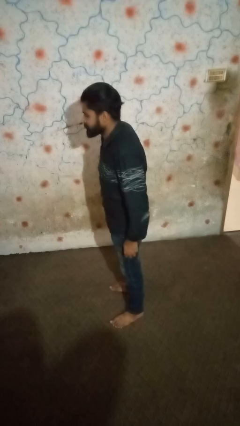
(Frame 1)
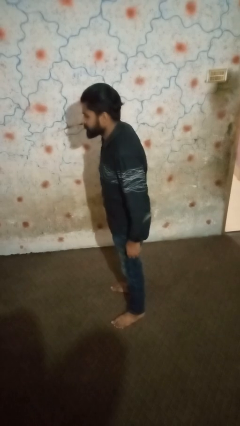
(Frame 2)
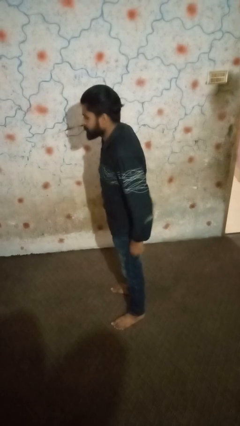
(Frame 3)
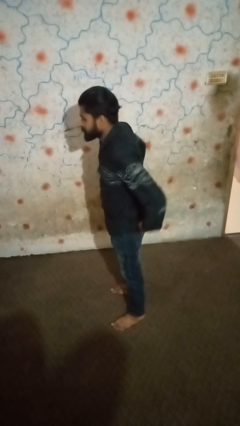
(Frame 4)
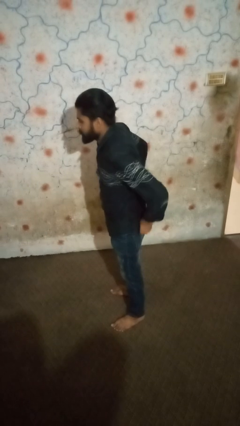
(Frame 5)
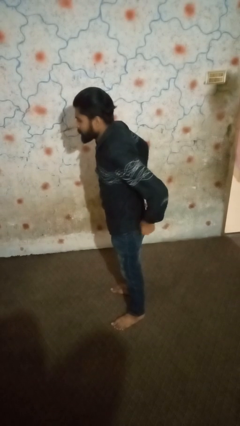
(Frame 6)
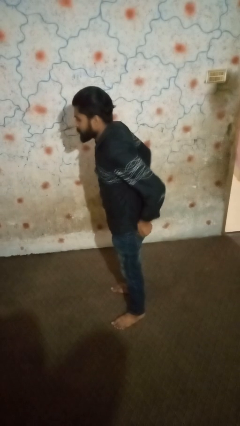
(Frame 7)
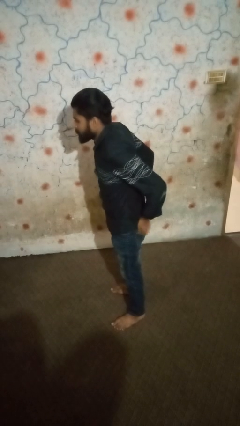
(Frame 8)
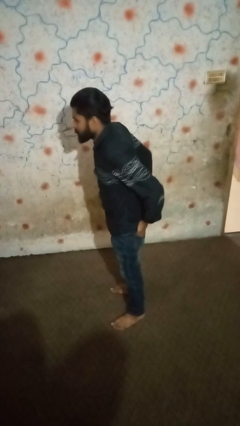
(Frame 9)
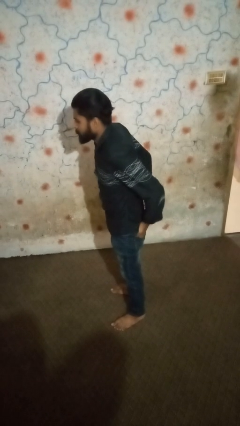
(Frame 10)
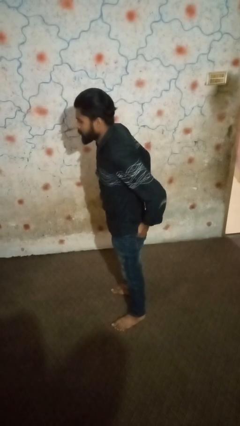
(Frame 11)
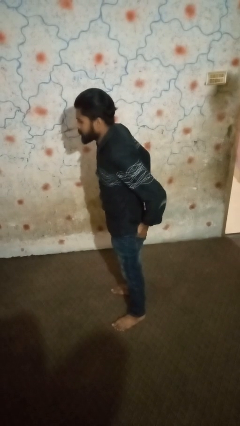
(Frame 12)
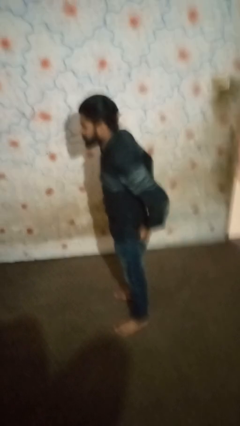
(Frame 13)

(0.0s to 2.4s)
person puts hands in back pockets

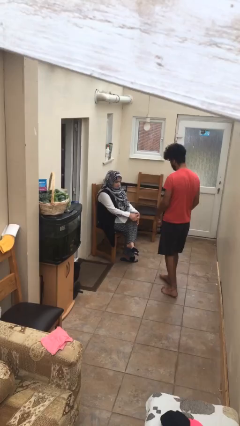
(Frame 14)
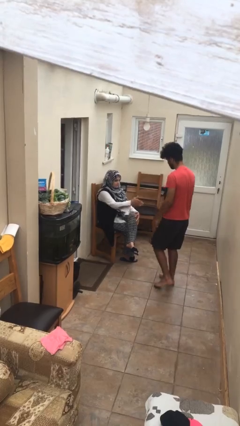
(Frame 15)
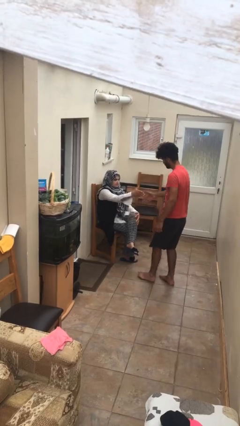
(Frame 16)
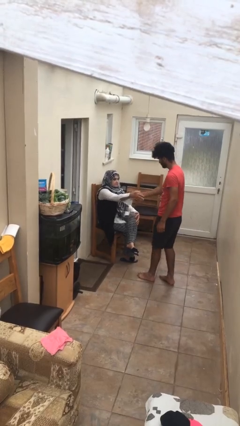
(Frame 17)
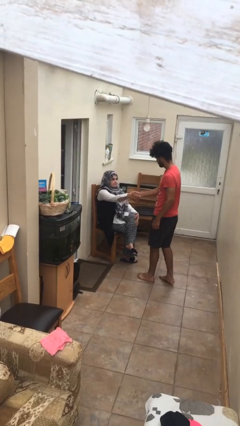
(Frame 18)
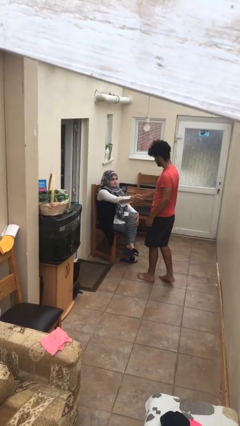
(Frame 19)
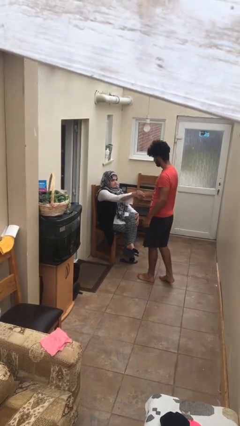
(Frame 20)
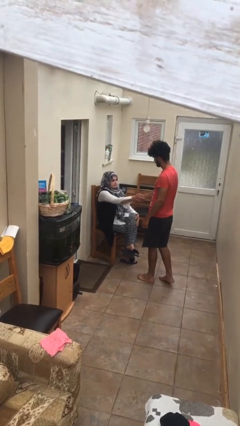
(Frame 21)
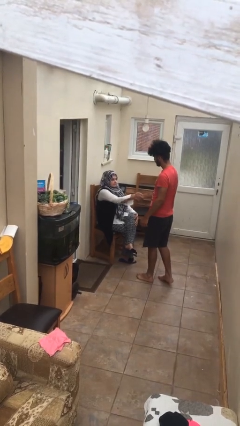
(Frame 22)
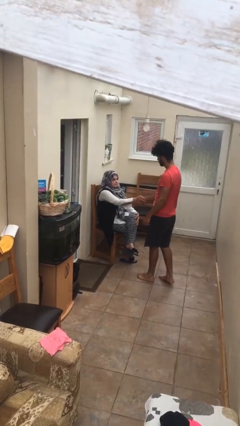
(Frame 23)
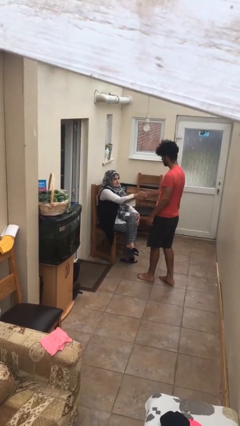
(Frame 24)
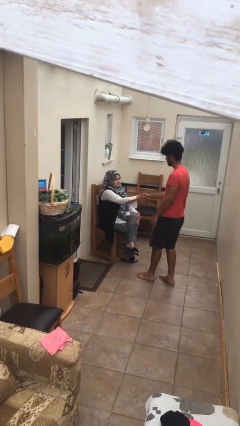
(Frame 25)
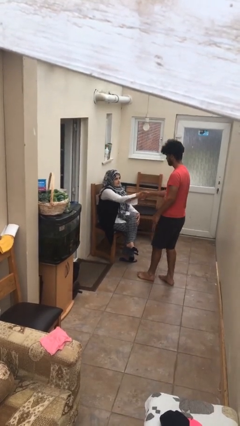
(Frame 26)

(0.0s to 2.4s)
person shakes hand

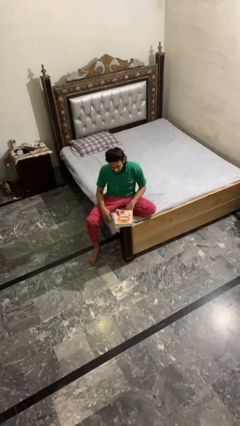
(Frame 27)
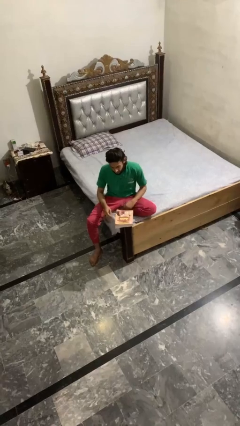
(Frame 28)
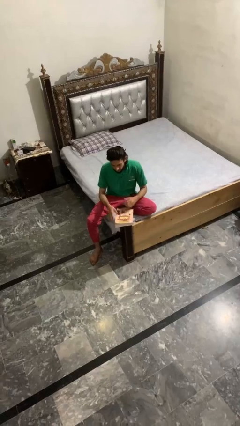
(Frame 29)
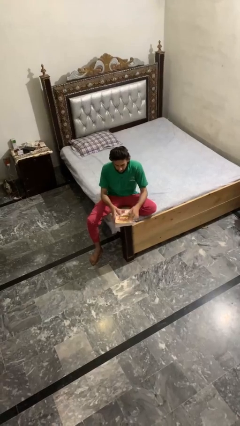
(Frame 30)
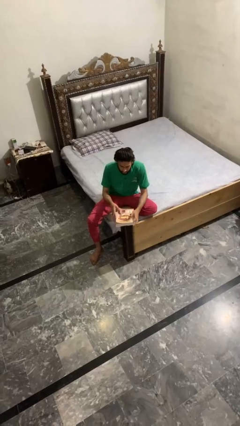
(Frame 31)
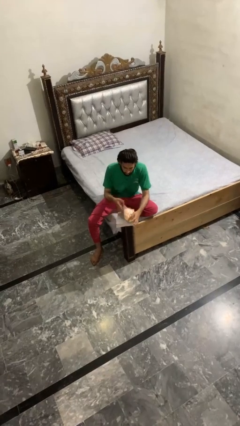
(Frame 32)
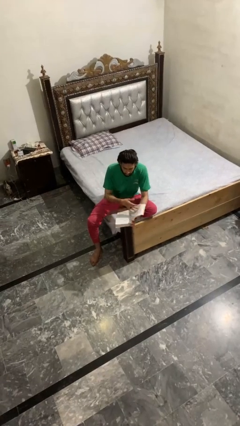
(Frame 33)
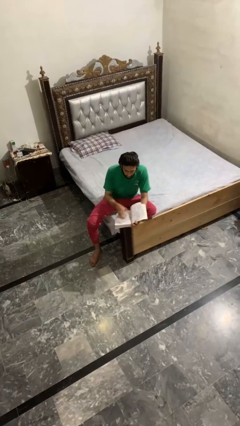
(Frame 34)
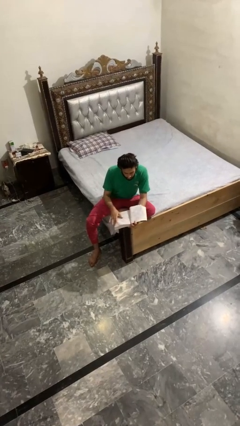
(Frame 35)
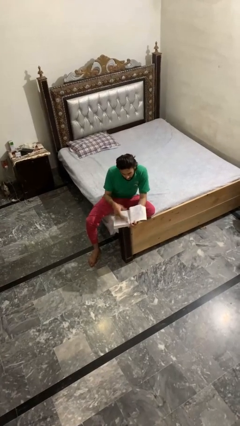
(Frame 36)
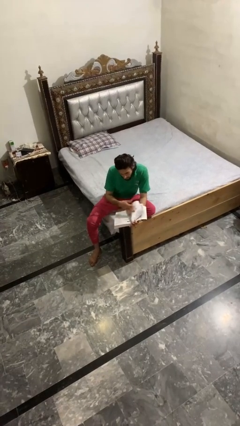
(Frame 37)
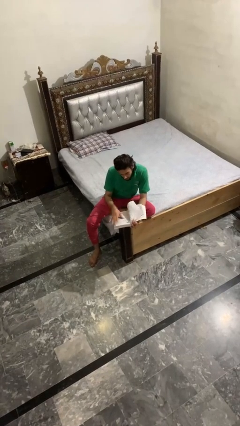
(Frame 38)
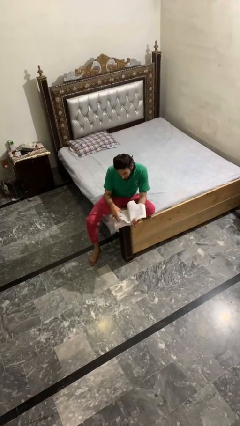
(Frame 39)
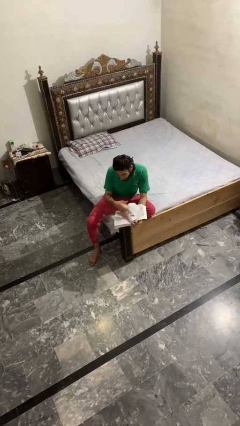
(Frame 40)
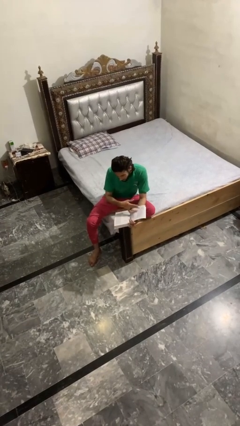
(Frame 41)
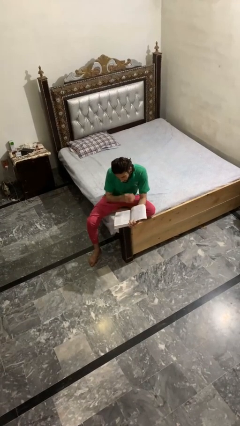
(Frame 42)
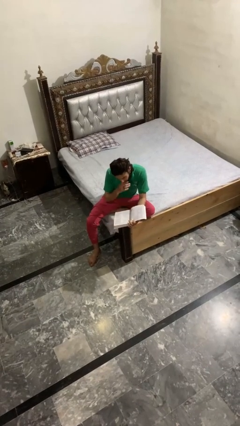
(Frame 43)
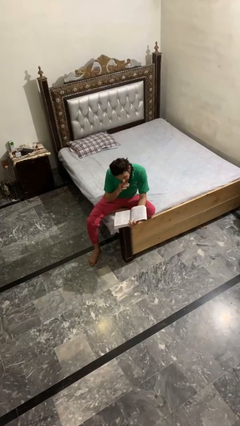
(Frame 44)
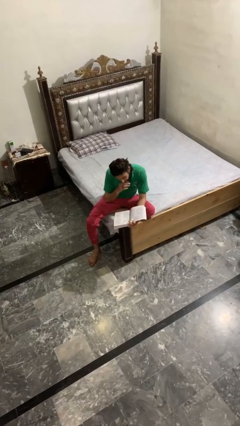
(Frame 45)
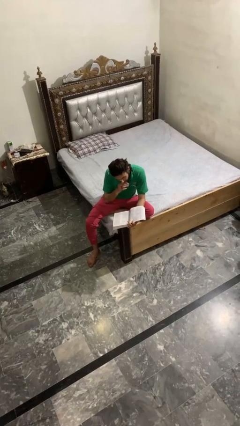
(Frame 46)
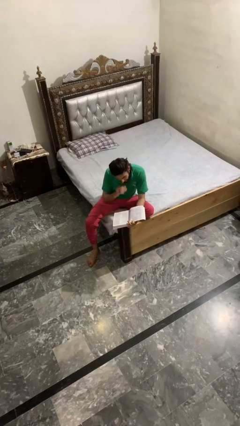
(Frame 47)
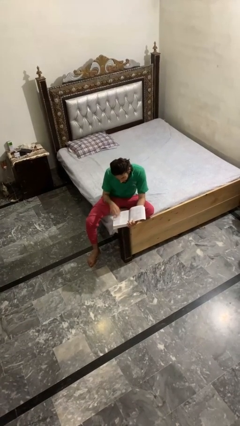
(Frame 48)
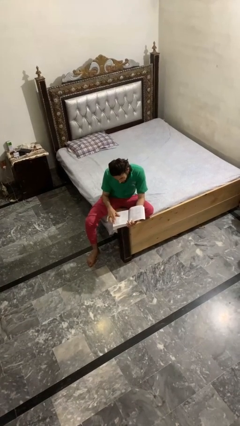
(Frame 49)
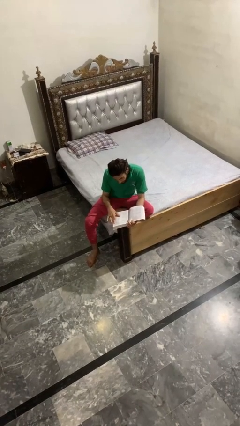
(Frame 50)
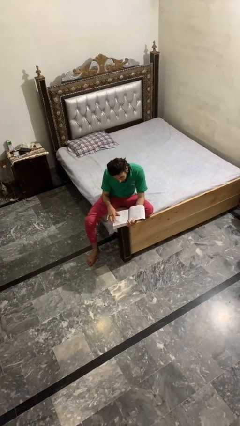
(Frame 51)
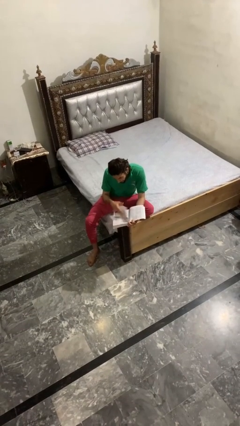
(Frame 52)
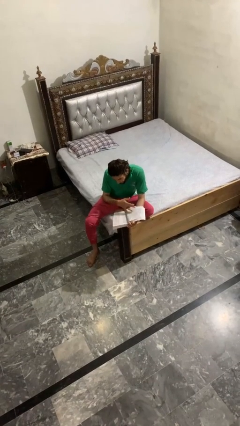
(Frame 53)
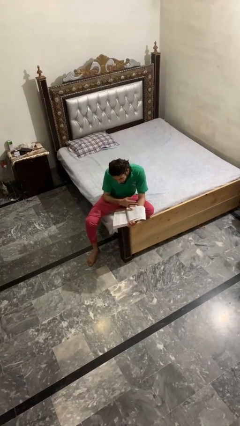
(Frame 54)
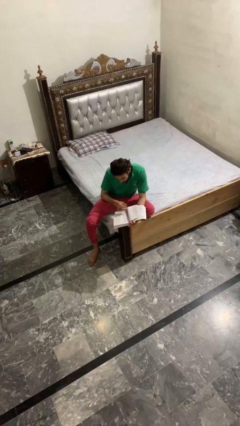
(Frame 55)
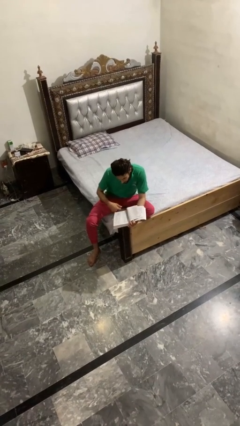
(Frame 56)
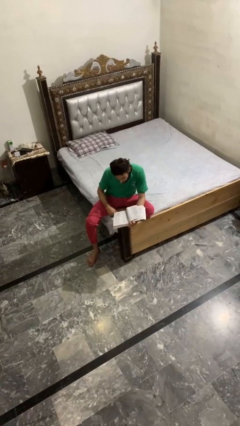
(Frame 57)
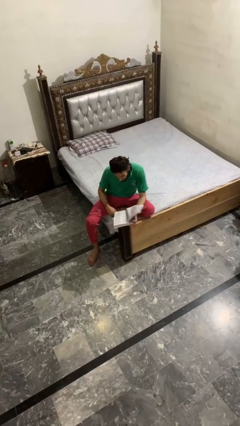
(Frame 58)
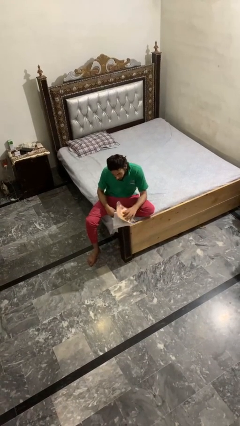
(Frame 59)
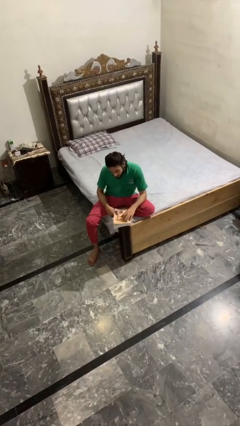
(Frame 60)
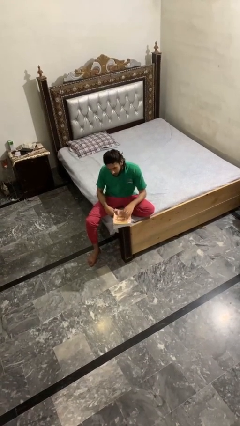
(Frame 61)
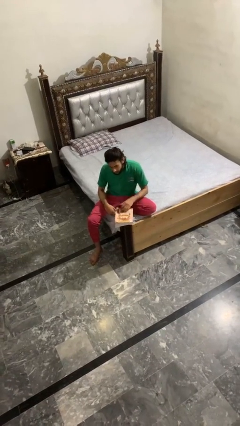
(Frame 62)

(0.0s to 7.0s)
person reads book

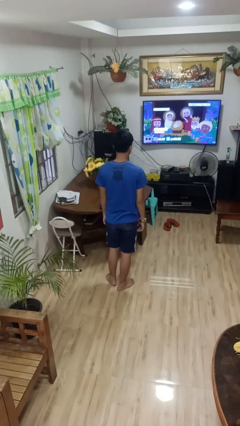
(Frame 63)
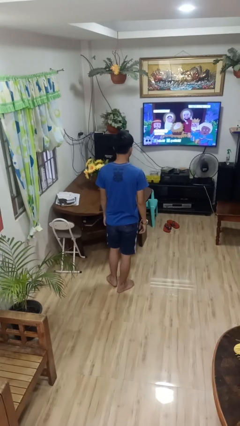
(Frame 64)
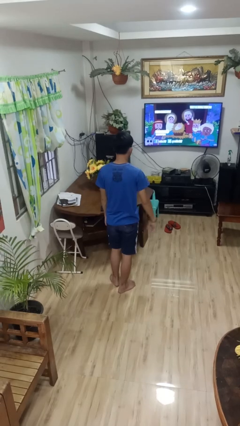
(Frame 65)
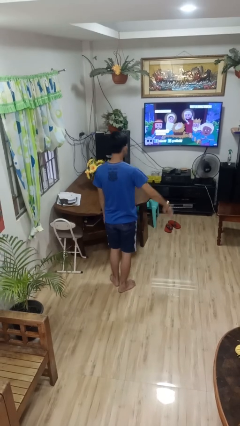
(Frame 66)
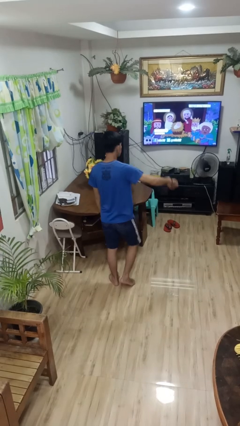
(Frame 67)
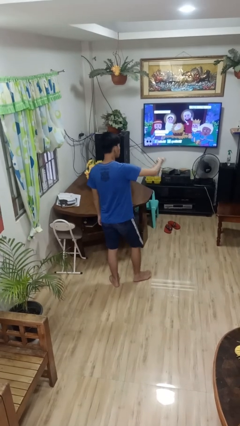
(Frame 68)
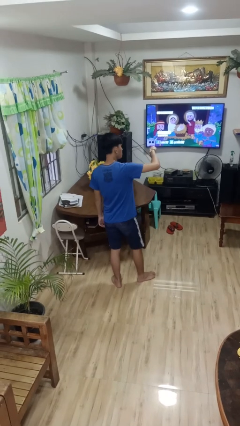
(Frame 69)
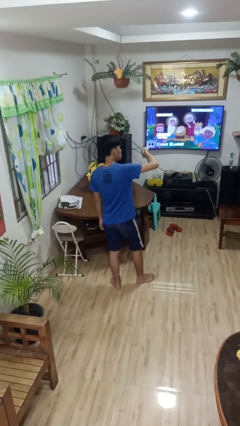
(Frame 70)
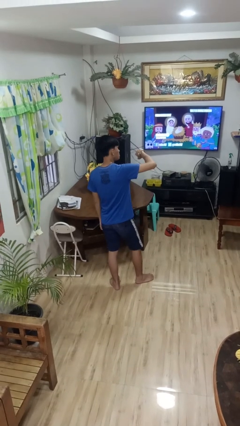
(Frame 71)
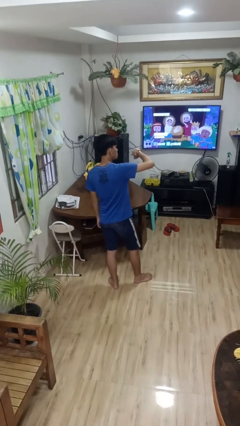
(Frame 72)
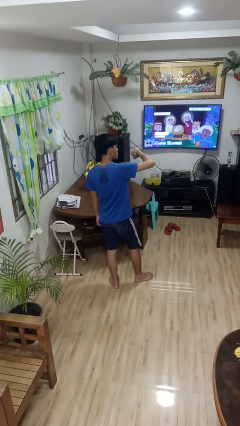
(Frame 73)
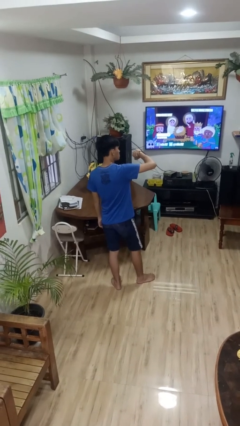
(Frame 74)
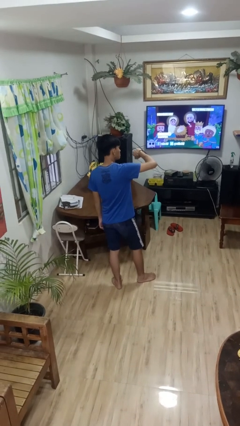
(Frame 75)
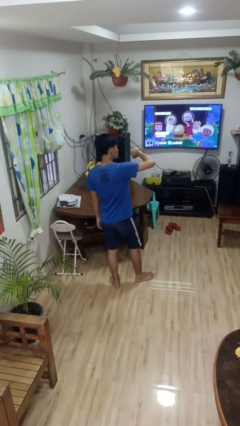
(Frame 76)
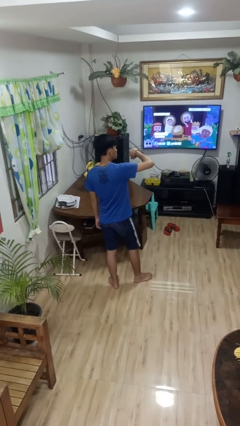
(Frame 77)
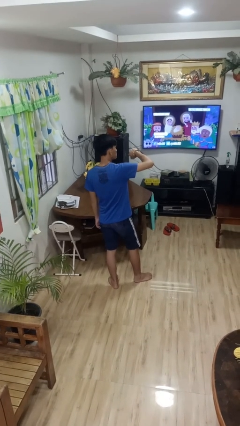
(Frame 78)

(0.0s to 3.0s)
person looks at wristwatch

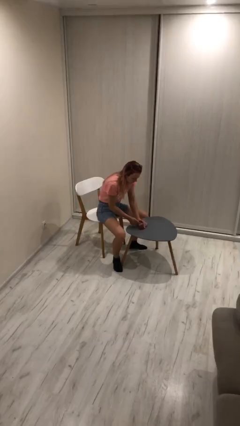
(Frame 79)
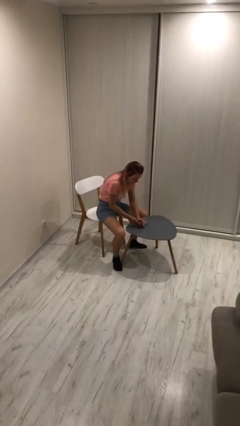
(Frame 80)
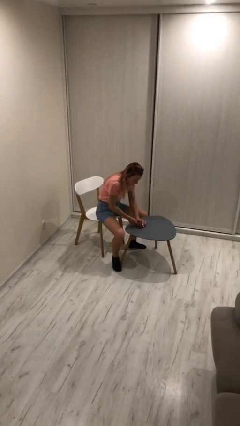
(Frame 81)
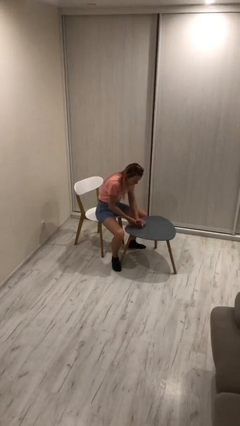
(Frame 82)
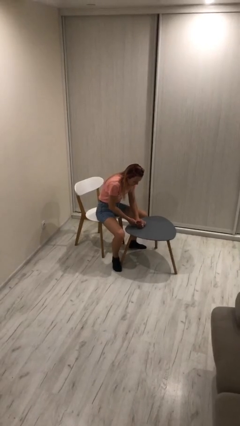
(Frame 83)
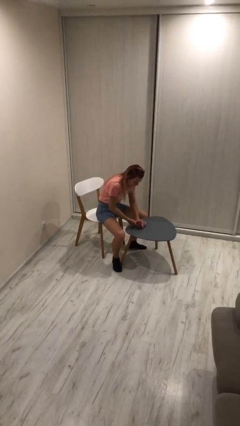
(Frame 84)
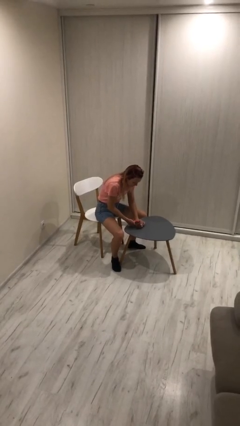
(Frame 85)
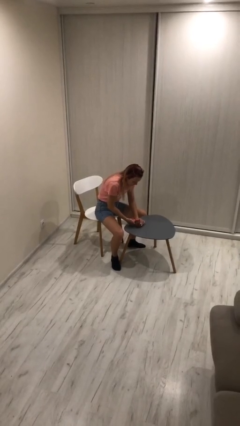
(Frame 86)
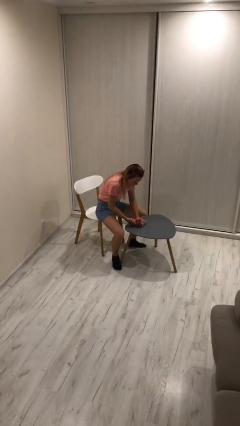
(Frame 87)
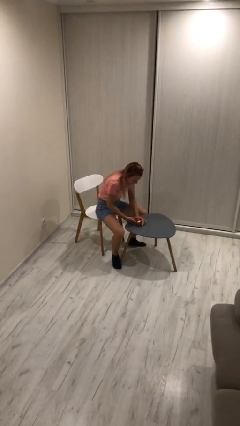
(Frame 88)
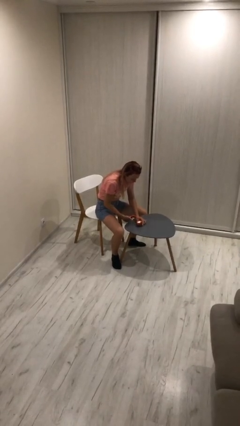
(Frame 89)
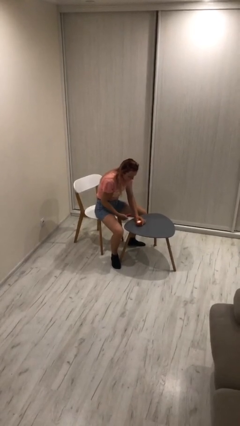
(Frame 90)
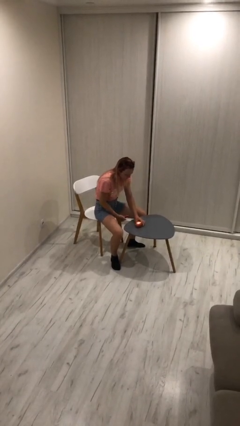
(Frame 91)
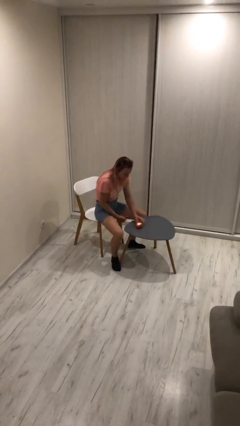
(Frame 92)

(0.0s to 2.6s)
person lights candle

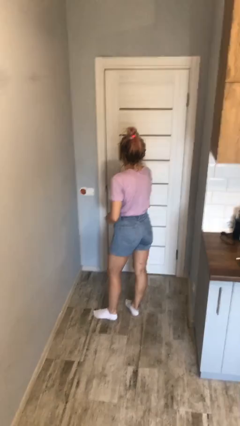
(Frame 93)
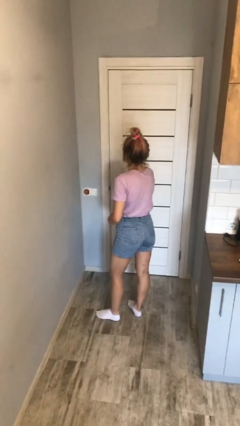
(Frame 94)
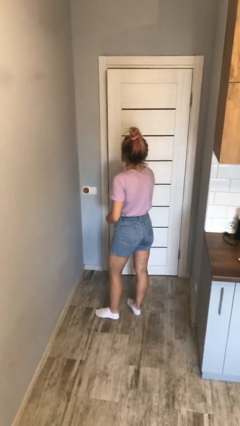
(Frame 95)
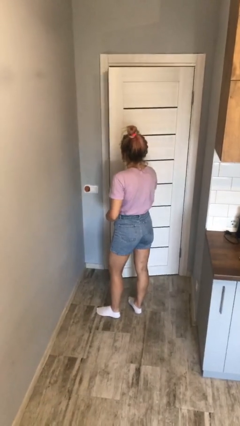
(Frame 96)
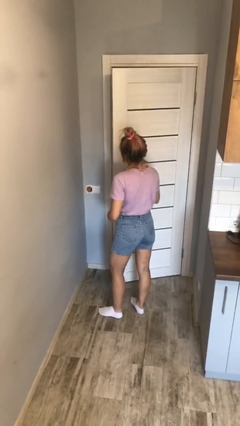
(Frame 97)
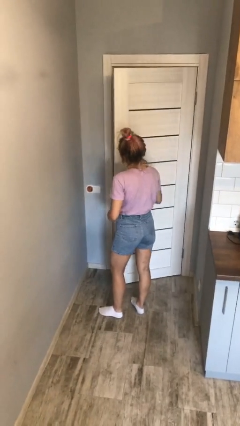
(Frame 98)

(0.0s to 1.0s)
person opens facility door
